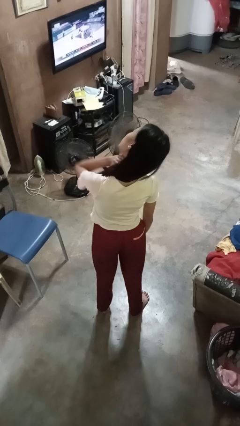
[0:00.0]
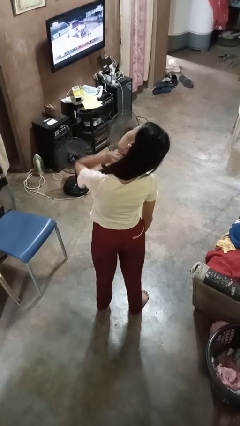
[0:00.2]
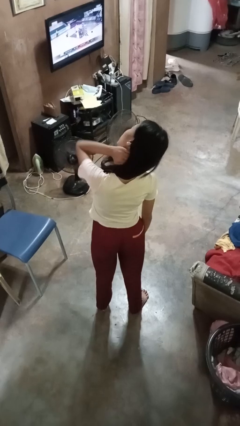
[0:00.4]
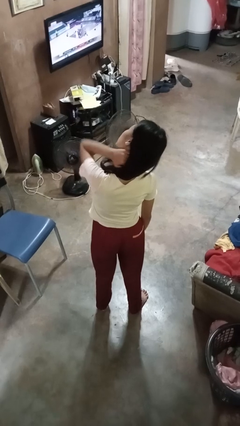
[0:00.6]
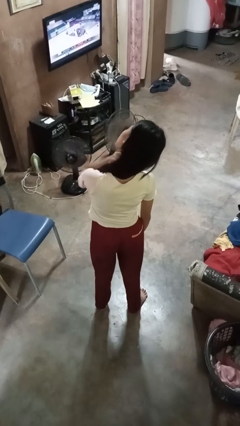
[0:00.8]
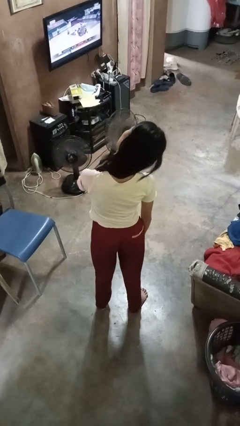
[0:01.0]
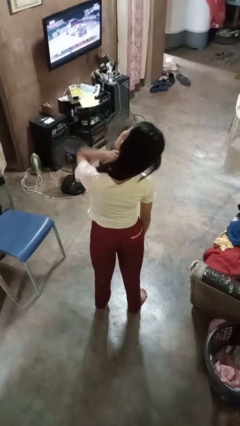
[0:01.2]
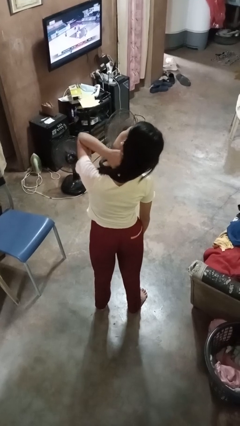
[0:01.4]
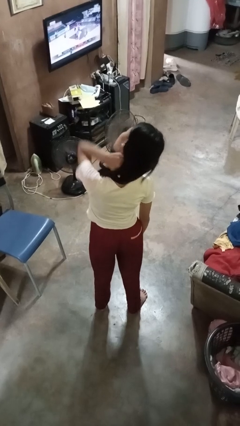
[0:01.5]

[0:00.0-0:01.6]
person rubs neck

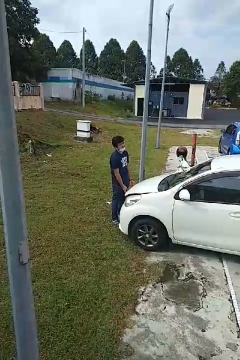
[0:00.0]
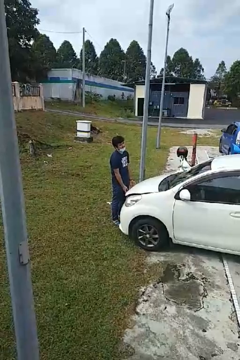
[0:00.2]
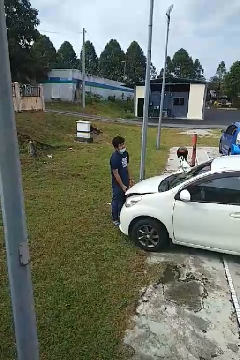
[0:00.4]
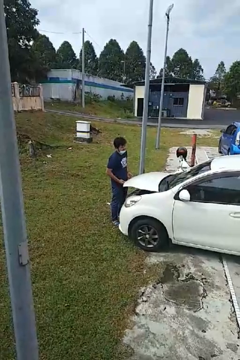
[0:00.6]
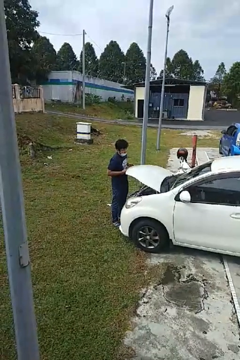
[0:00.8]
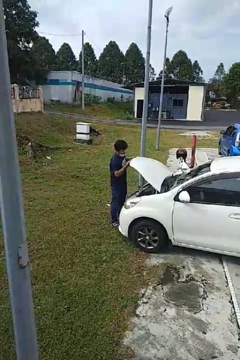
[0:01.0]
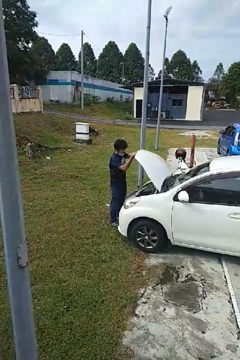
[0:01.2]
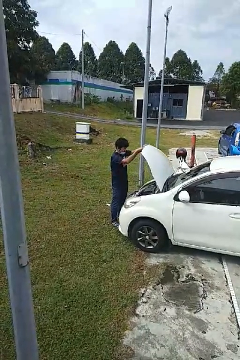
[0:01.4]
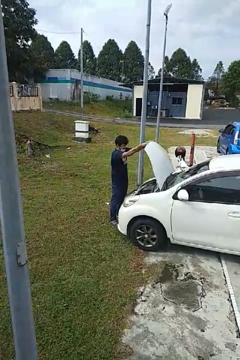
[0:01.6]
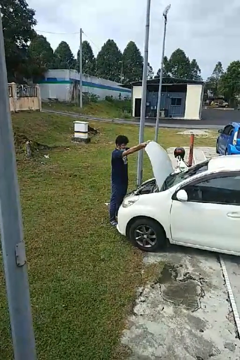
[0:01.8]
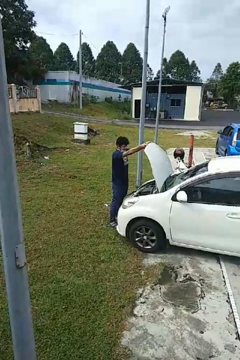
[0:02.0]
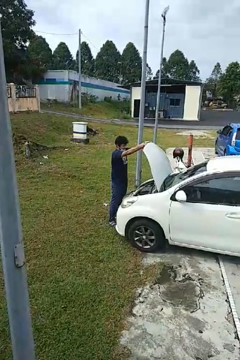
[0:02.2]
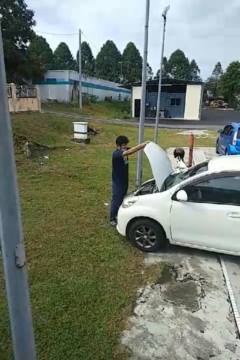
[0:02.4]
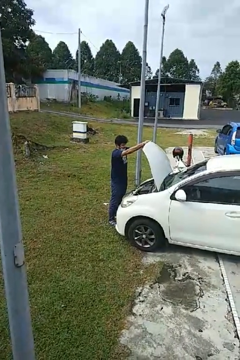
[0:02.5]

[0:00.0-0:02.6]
person opens car hood

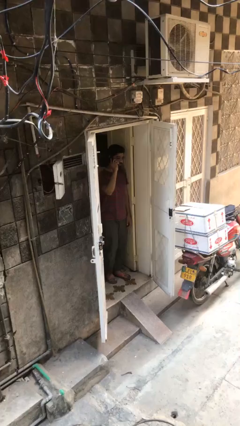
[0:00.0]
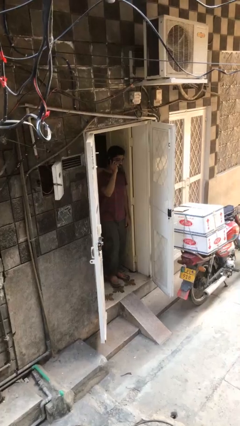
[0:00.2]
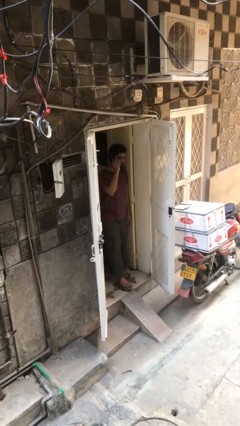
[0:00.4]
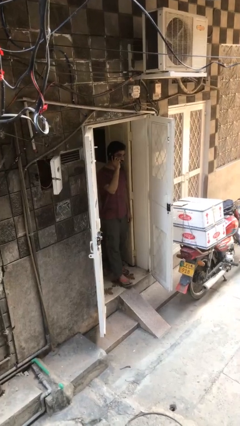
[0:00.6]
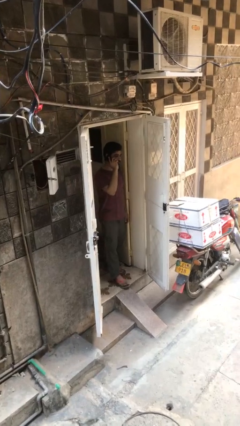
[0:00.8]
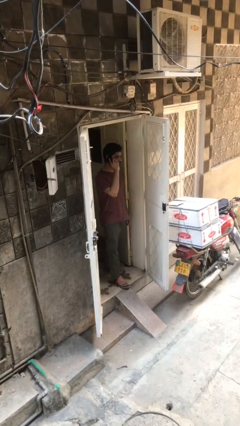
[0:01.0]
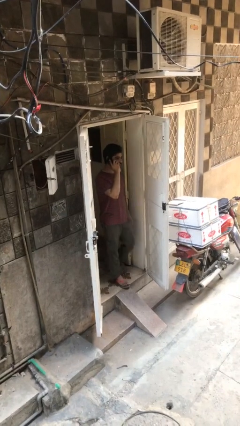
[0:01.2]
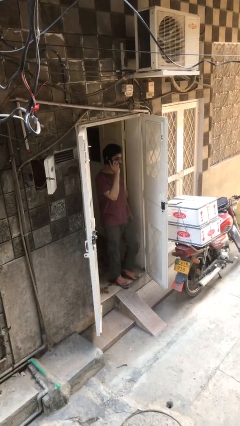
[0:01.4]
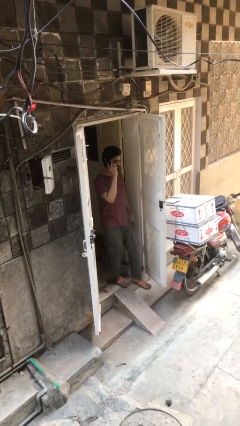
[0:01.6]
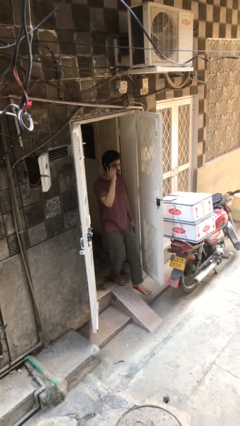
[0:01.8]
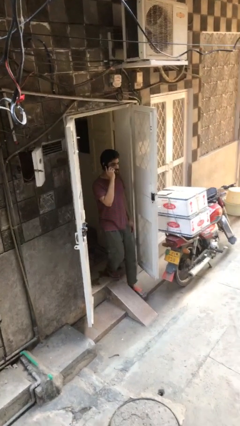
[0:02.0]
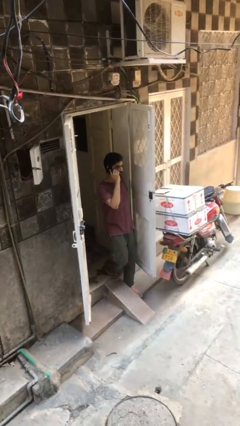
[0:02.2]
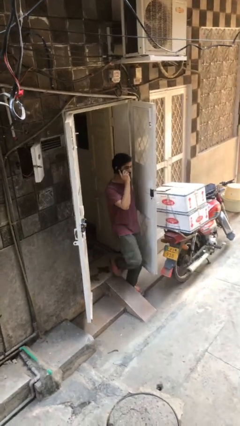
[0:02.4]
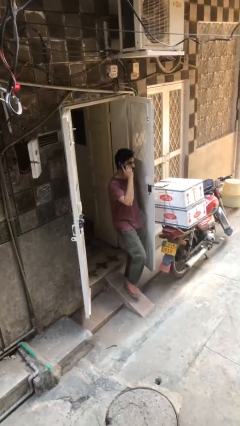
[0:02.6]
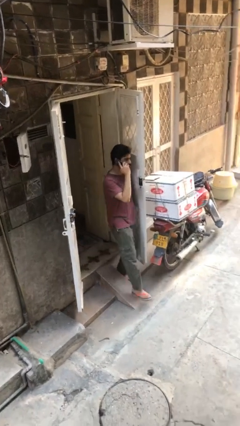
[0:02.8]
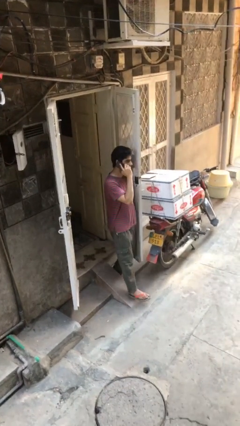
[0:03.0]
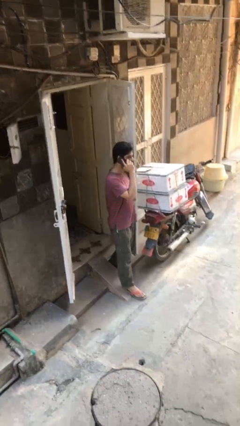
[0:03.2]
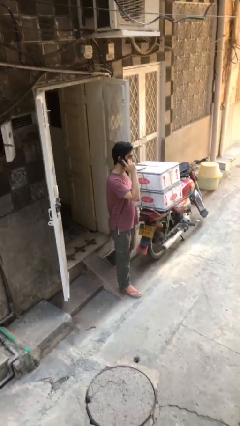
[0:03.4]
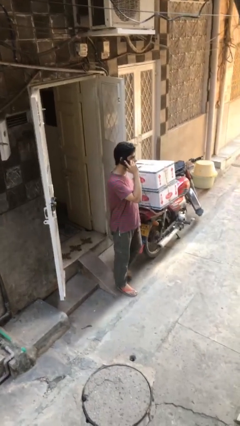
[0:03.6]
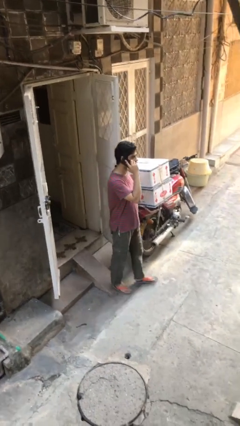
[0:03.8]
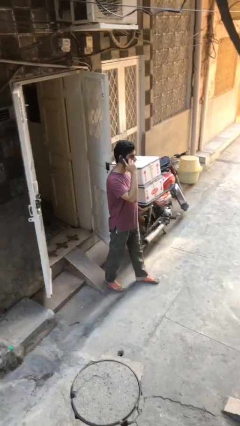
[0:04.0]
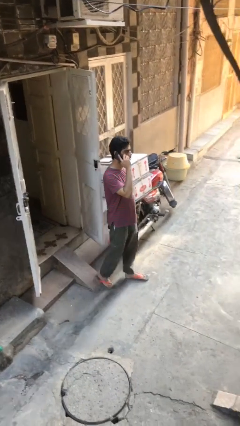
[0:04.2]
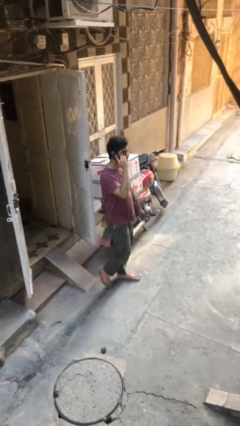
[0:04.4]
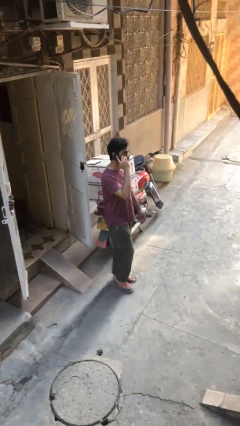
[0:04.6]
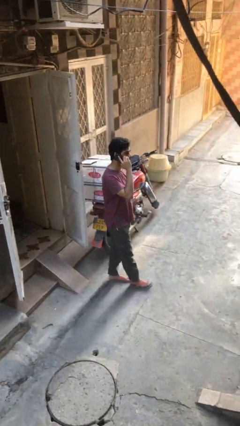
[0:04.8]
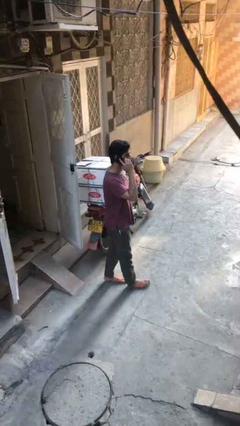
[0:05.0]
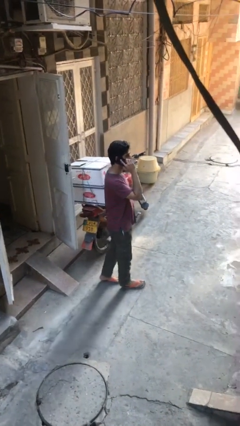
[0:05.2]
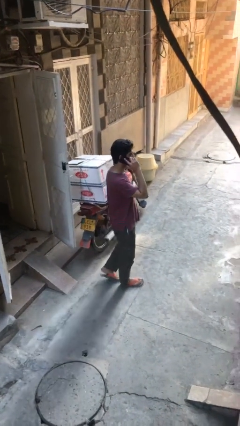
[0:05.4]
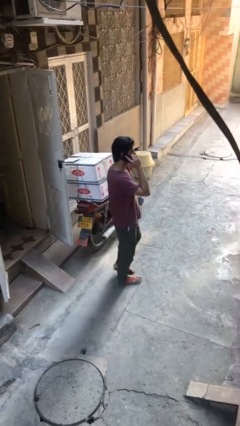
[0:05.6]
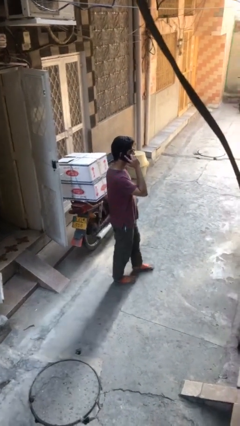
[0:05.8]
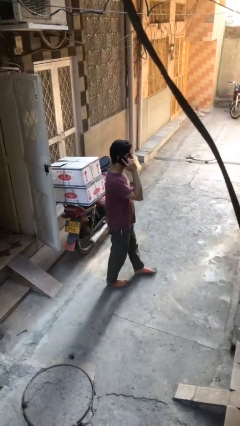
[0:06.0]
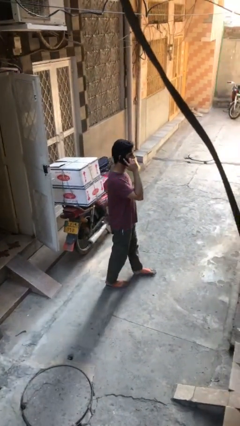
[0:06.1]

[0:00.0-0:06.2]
person enters scene through structure

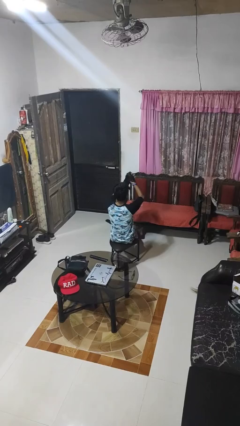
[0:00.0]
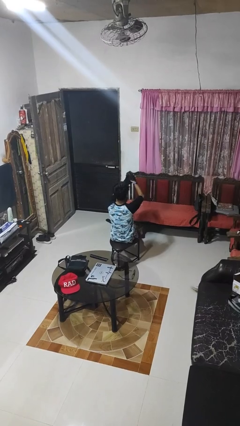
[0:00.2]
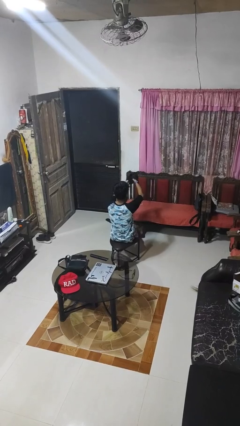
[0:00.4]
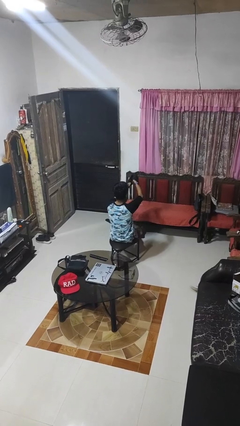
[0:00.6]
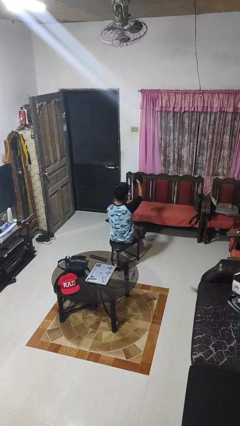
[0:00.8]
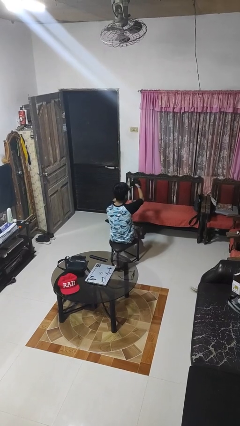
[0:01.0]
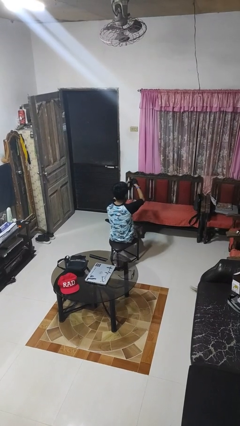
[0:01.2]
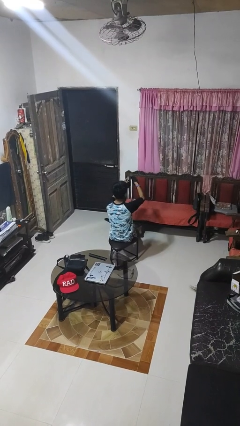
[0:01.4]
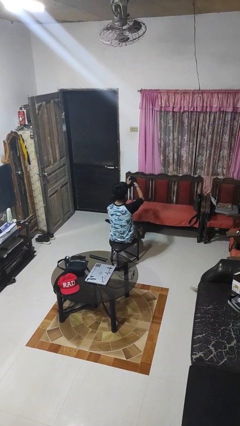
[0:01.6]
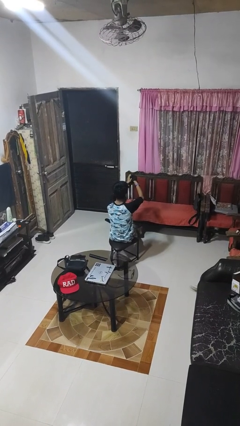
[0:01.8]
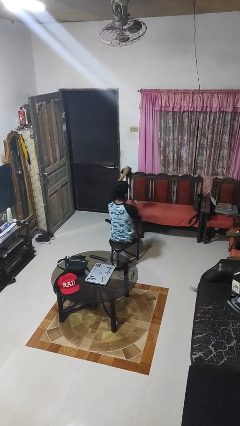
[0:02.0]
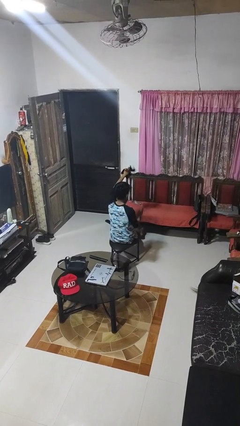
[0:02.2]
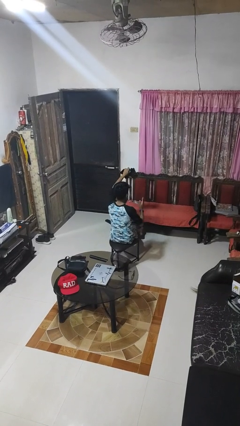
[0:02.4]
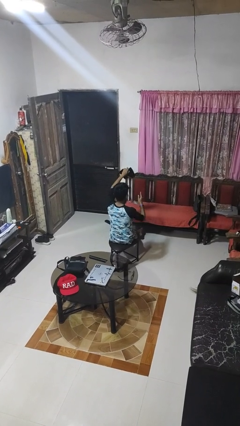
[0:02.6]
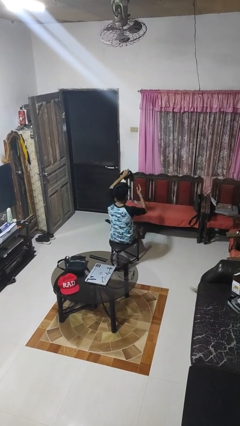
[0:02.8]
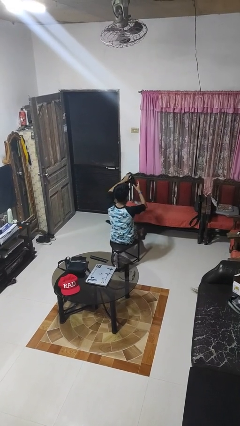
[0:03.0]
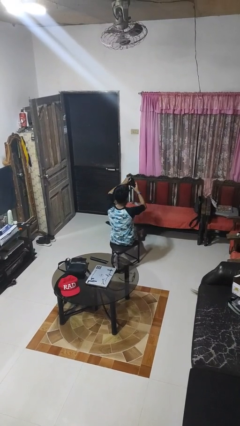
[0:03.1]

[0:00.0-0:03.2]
person takes off gloves

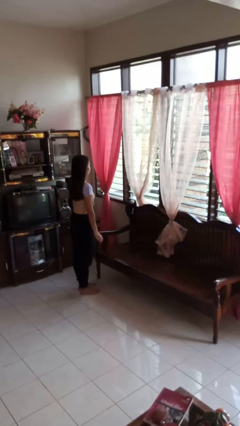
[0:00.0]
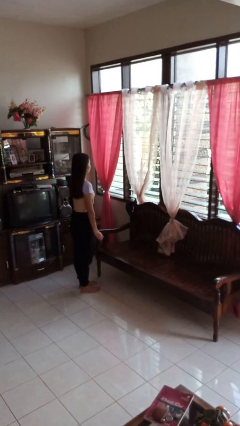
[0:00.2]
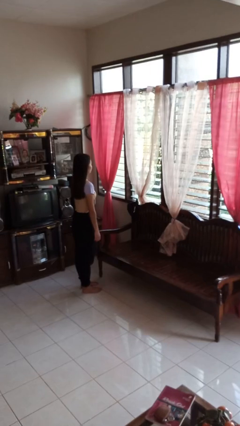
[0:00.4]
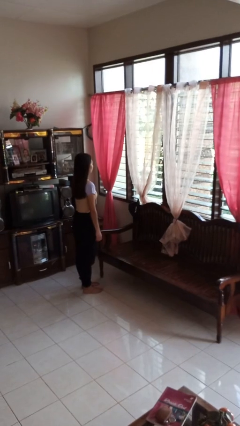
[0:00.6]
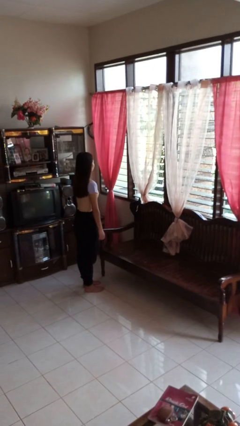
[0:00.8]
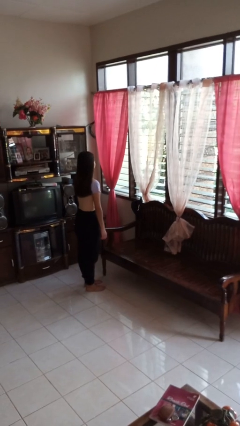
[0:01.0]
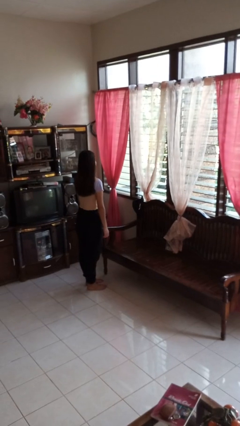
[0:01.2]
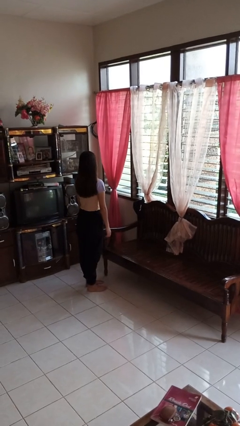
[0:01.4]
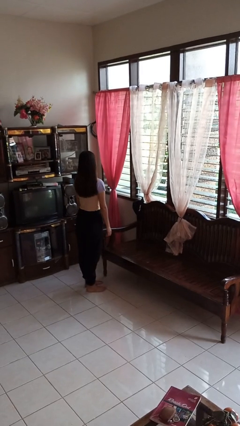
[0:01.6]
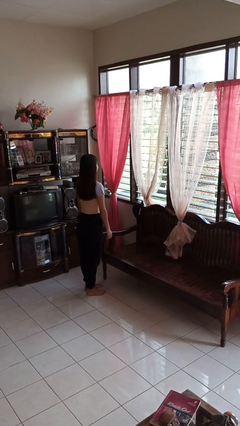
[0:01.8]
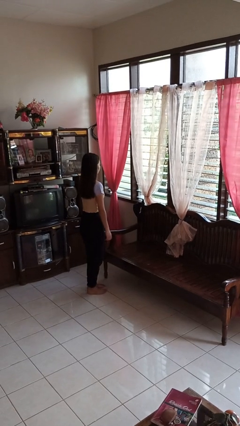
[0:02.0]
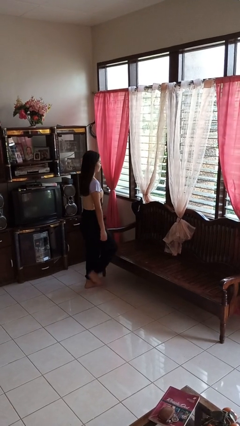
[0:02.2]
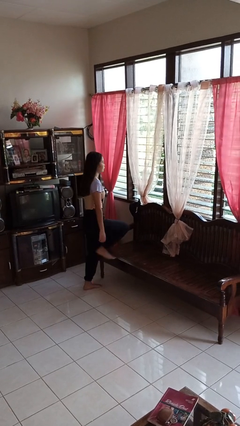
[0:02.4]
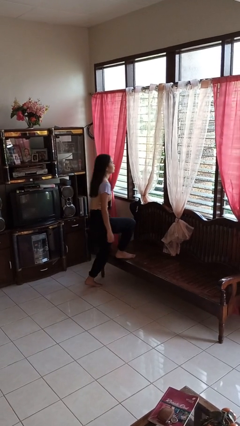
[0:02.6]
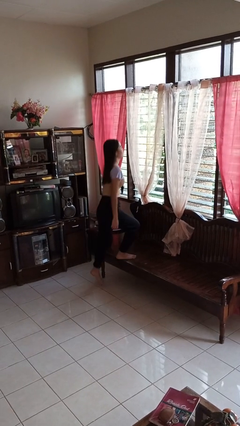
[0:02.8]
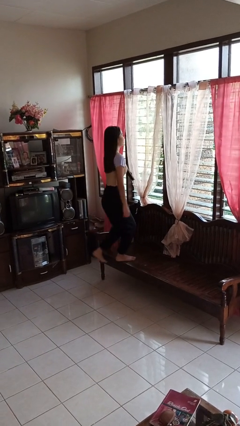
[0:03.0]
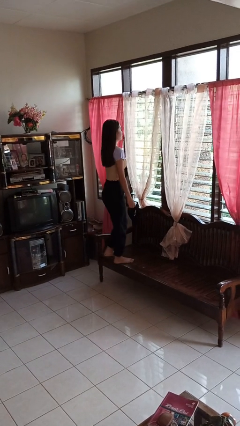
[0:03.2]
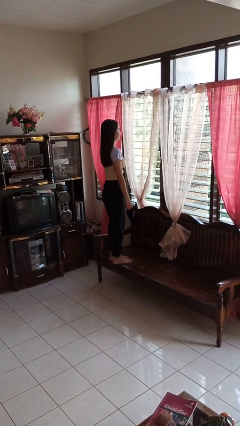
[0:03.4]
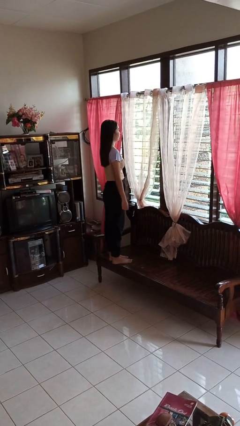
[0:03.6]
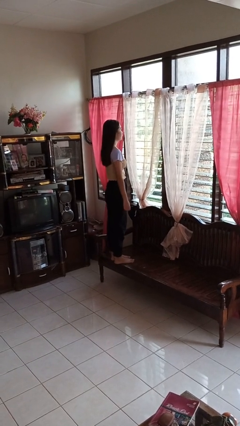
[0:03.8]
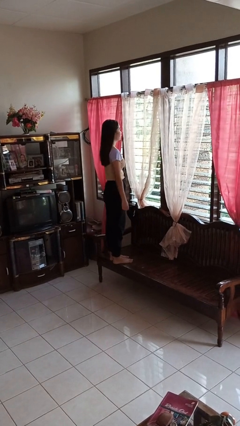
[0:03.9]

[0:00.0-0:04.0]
person climbs on couch

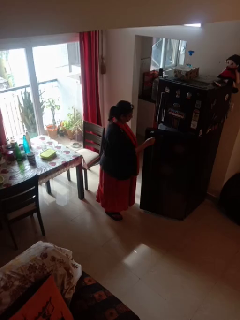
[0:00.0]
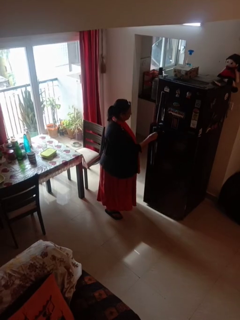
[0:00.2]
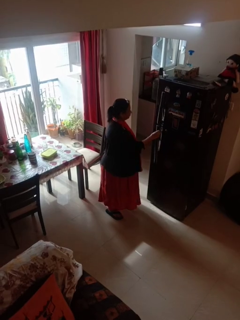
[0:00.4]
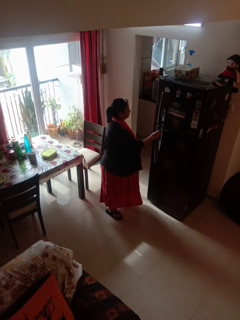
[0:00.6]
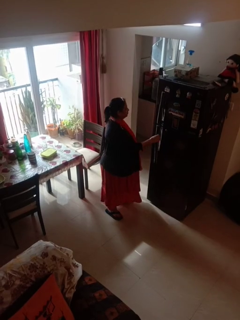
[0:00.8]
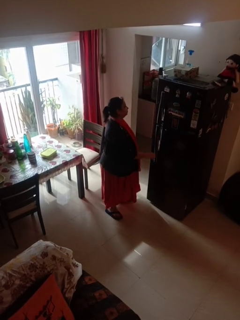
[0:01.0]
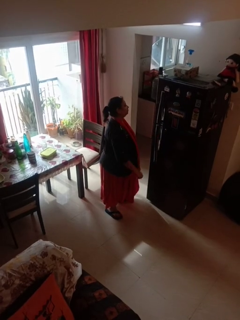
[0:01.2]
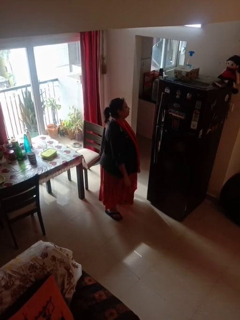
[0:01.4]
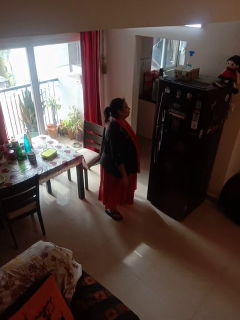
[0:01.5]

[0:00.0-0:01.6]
person closes refrigerator
